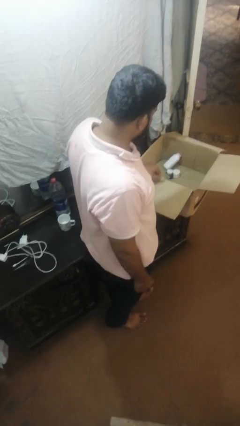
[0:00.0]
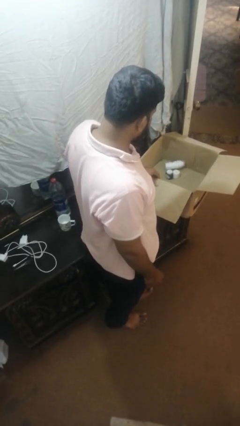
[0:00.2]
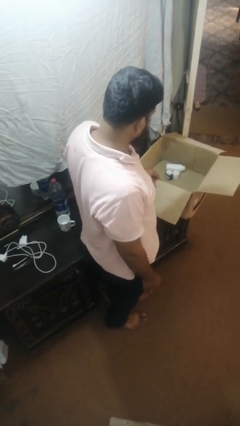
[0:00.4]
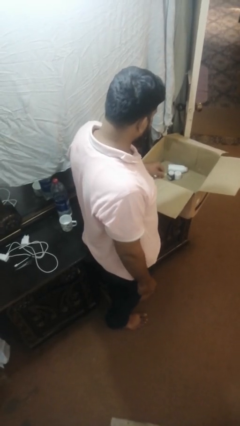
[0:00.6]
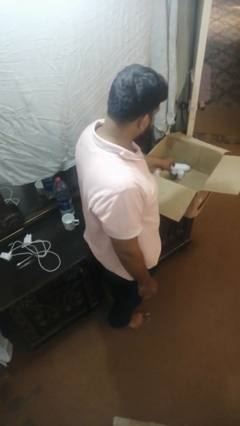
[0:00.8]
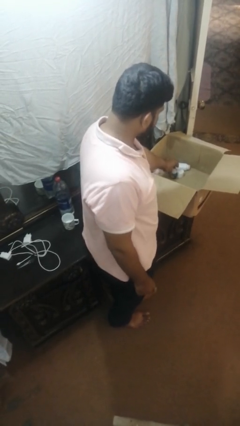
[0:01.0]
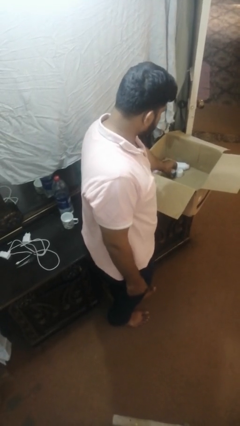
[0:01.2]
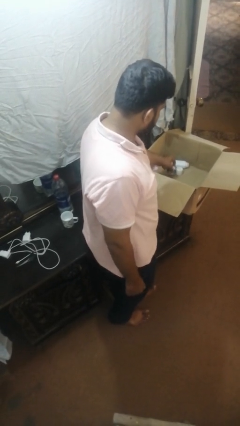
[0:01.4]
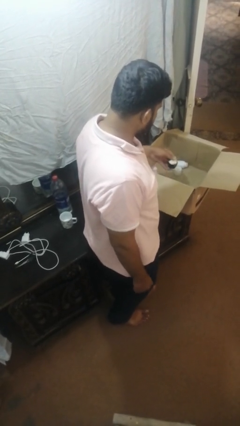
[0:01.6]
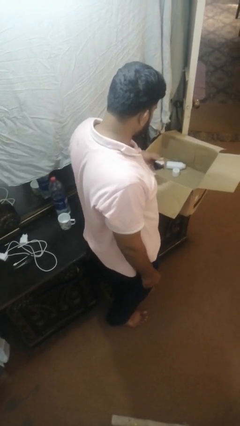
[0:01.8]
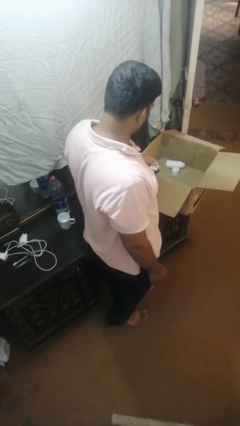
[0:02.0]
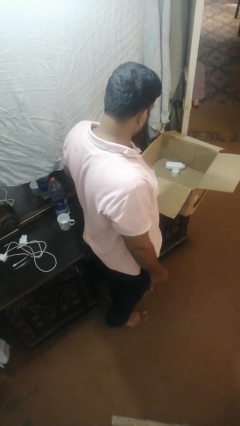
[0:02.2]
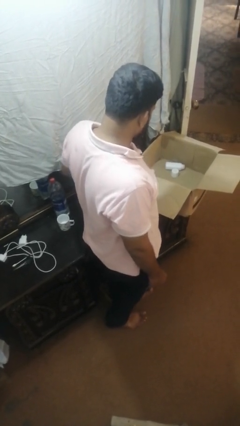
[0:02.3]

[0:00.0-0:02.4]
person takes object from box

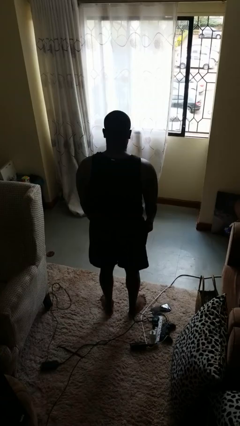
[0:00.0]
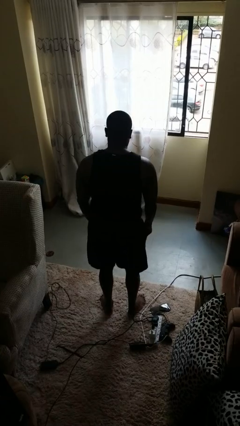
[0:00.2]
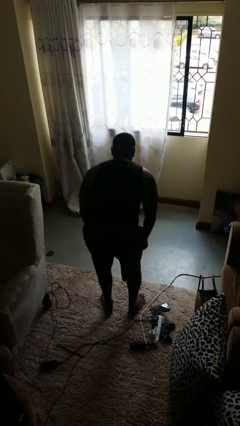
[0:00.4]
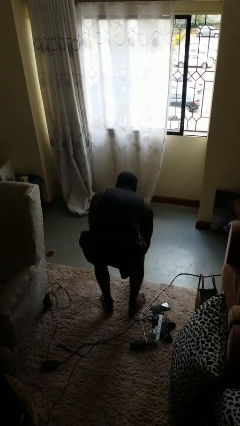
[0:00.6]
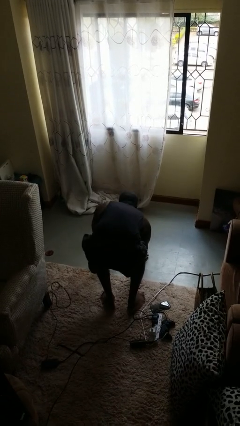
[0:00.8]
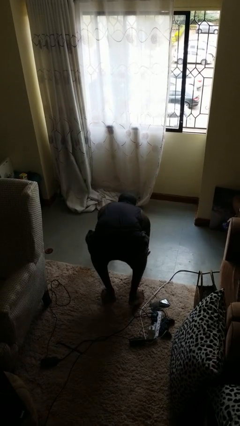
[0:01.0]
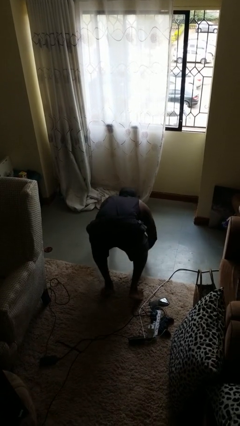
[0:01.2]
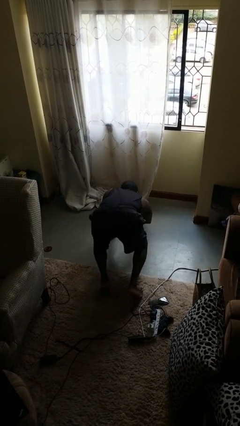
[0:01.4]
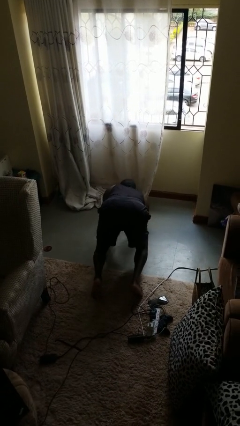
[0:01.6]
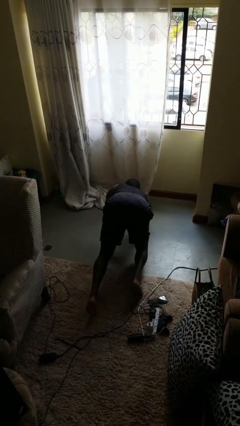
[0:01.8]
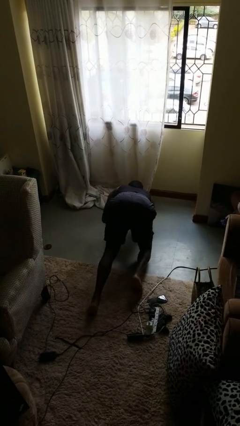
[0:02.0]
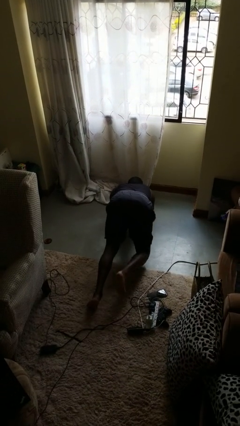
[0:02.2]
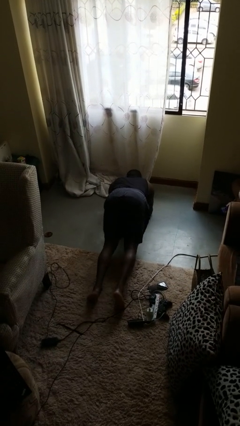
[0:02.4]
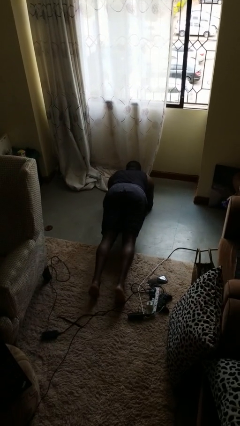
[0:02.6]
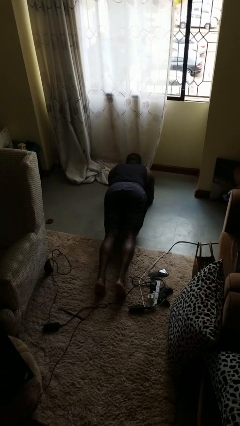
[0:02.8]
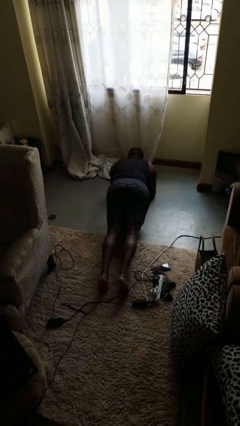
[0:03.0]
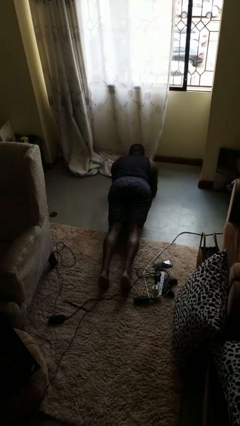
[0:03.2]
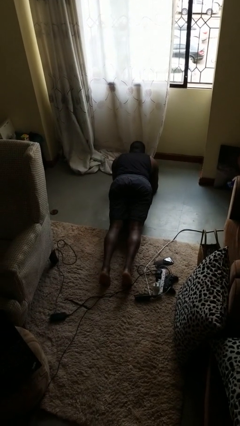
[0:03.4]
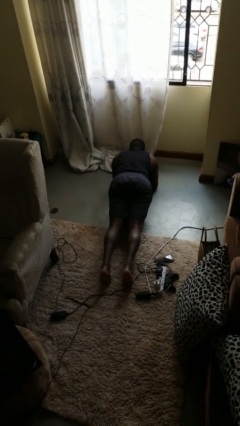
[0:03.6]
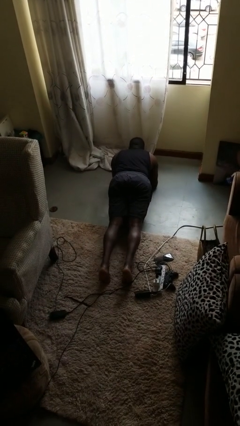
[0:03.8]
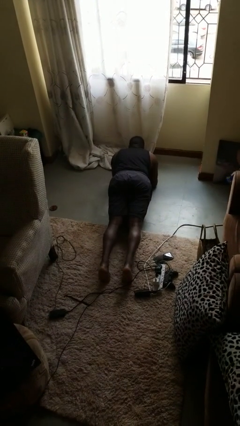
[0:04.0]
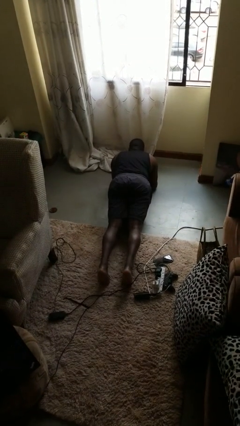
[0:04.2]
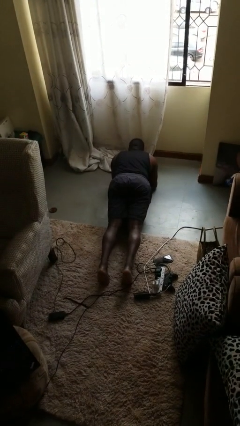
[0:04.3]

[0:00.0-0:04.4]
person exercises with plank

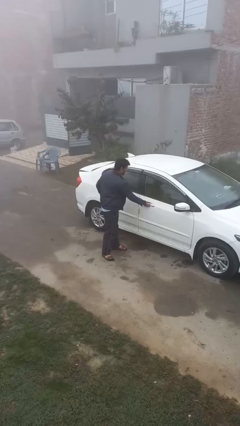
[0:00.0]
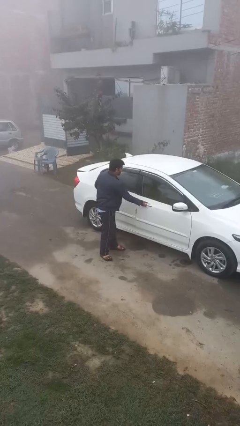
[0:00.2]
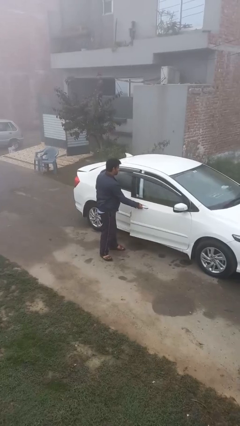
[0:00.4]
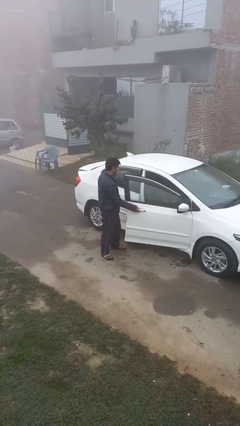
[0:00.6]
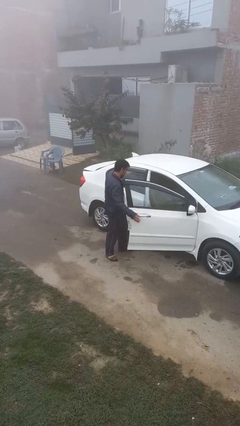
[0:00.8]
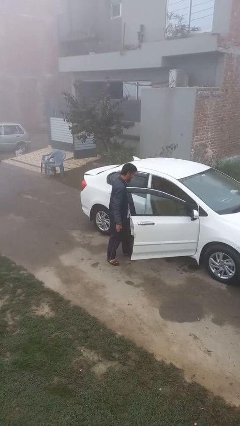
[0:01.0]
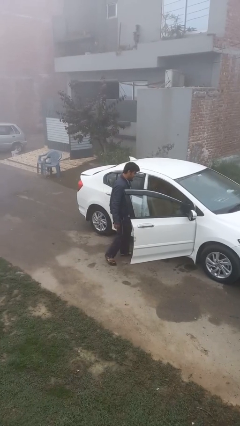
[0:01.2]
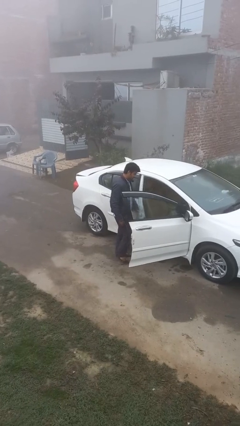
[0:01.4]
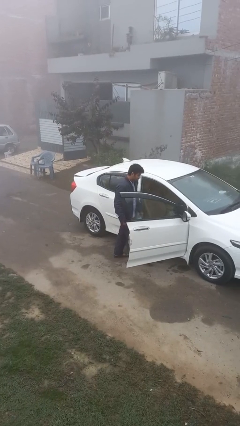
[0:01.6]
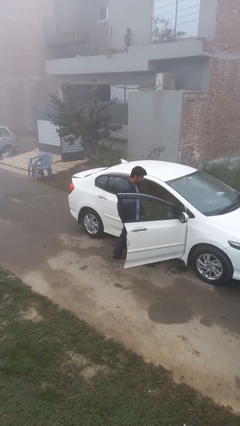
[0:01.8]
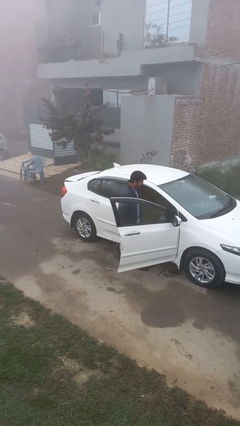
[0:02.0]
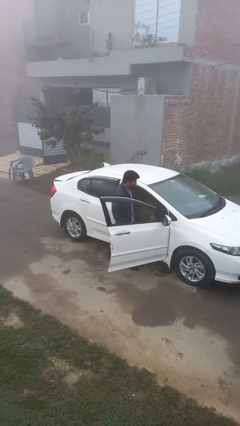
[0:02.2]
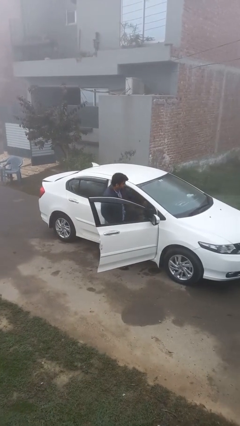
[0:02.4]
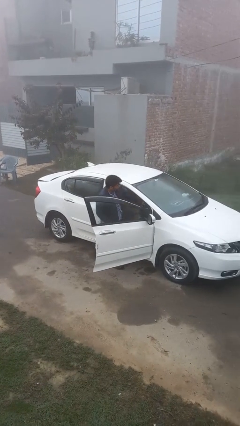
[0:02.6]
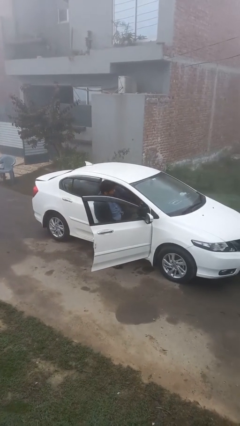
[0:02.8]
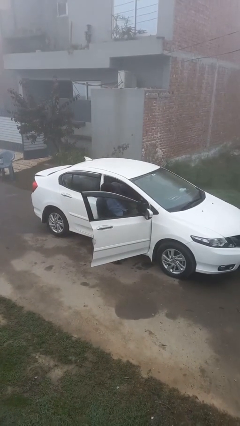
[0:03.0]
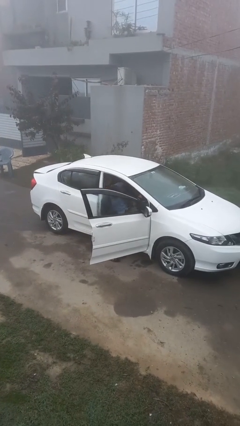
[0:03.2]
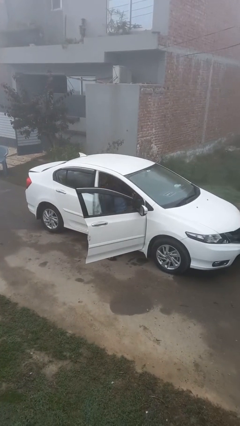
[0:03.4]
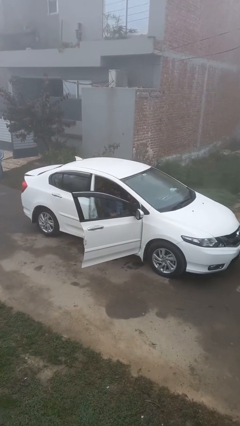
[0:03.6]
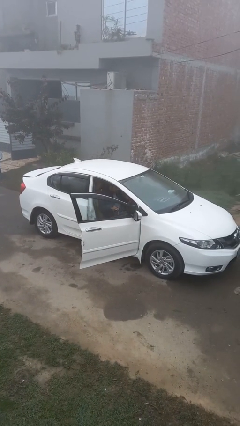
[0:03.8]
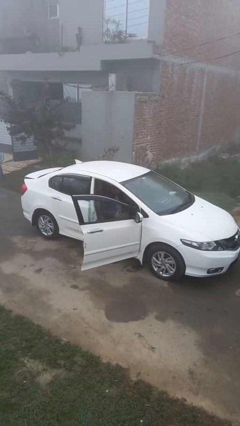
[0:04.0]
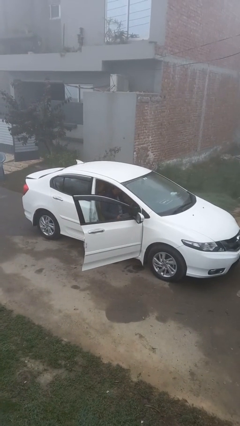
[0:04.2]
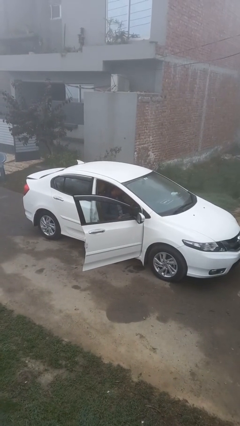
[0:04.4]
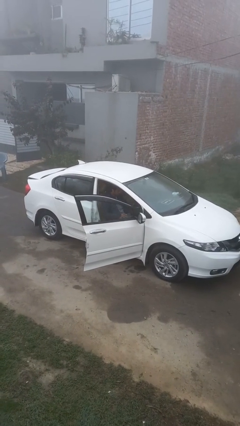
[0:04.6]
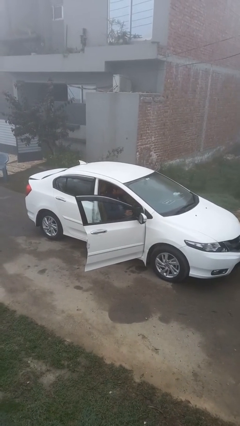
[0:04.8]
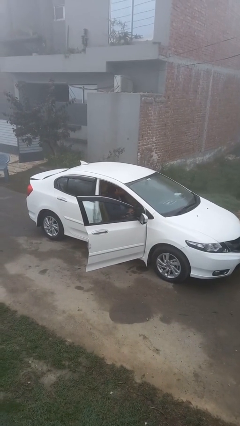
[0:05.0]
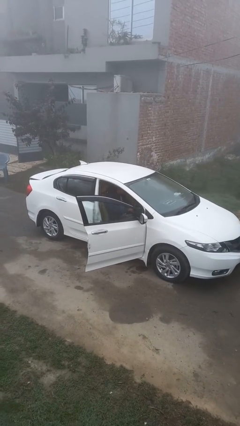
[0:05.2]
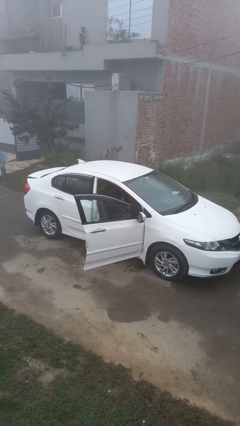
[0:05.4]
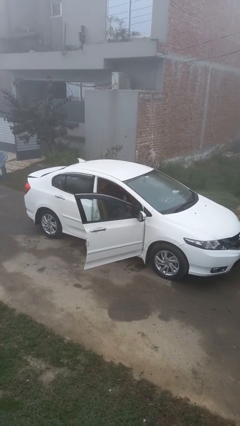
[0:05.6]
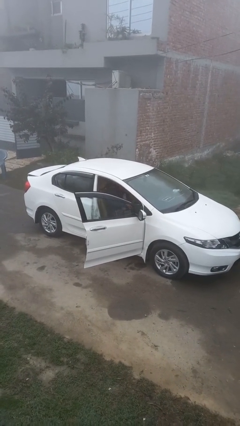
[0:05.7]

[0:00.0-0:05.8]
person enters car

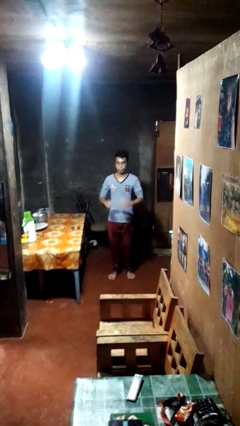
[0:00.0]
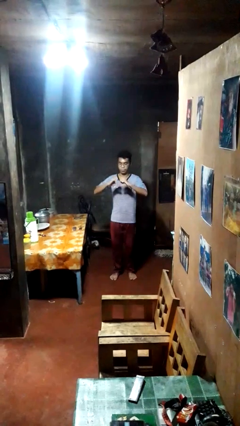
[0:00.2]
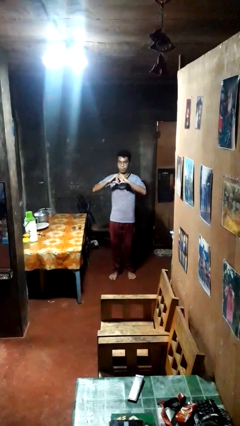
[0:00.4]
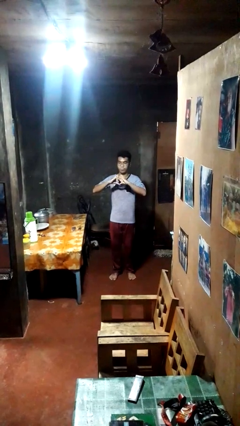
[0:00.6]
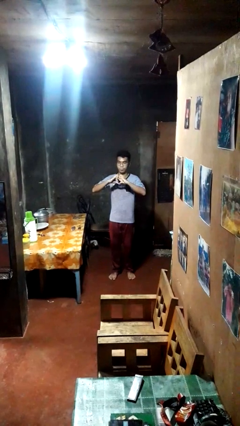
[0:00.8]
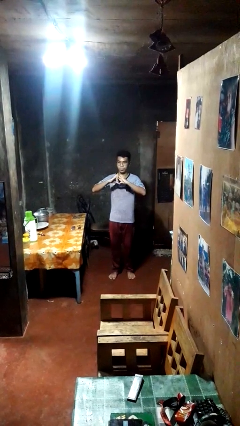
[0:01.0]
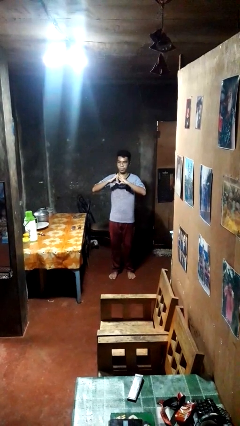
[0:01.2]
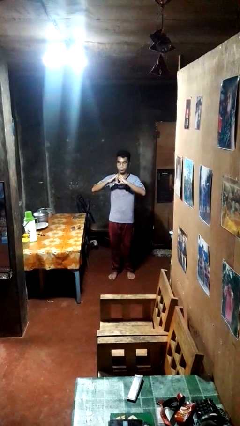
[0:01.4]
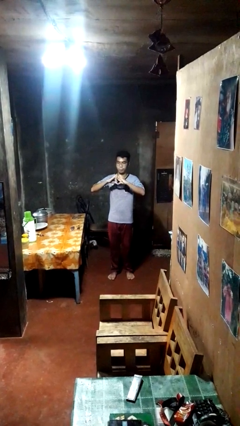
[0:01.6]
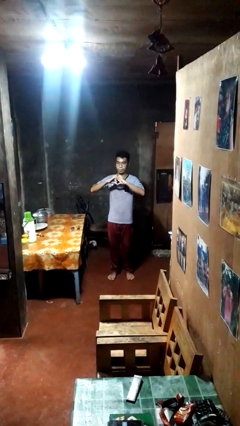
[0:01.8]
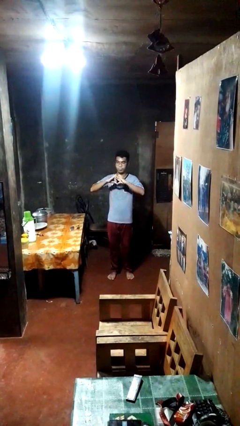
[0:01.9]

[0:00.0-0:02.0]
person gestures heart

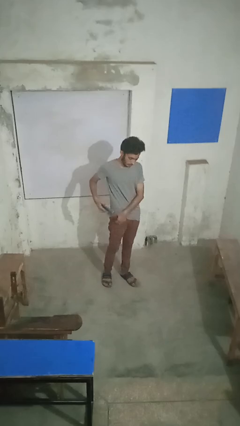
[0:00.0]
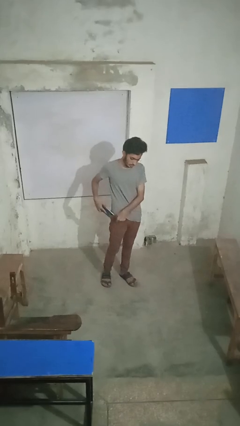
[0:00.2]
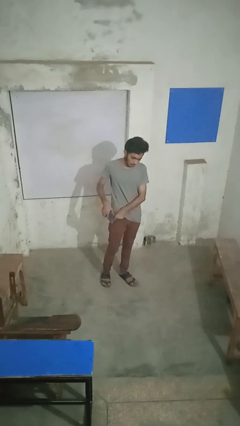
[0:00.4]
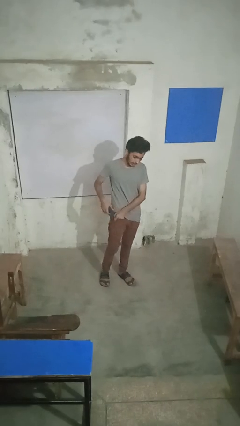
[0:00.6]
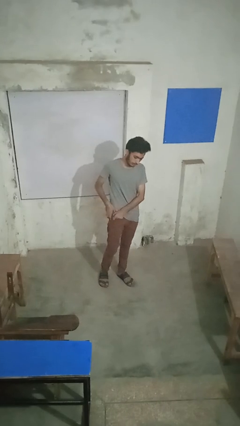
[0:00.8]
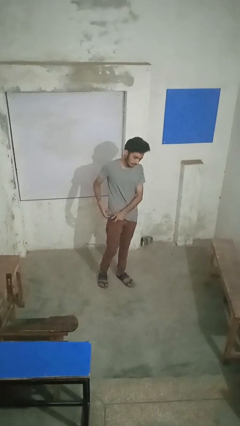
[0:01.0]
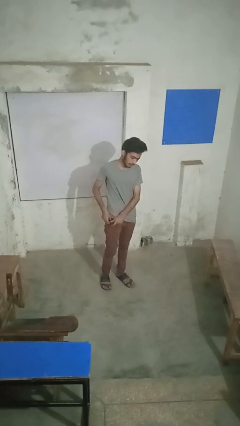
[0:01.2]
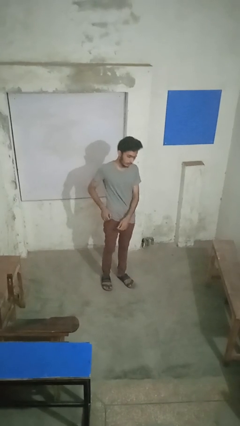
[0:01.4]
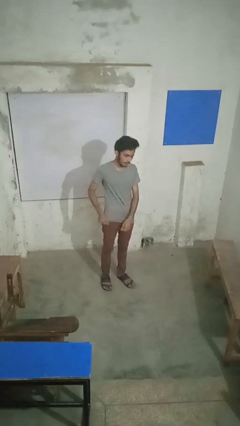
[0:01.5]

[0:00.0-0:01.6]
person puts phone into pocket

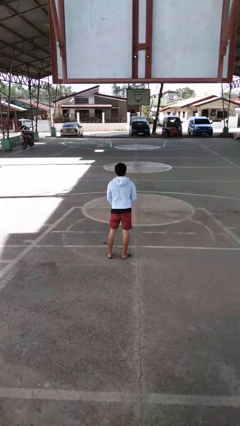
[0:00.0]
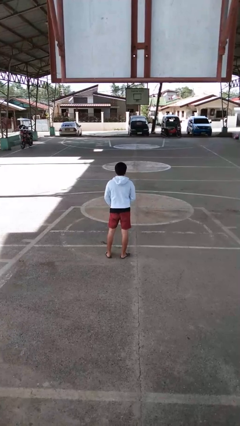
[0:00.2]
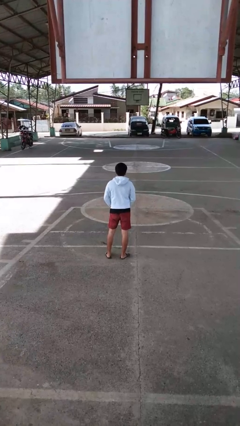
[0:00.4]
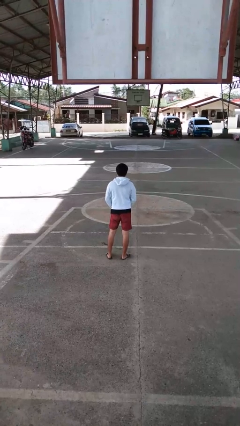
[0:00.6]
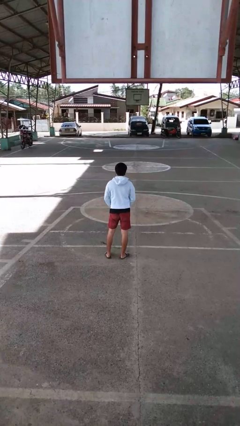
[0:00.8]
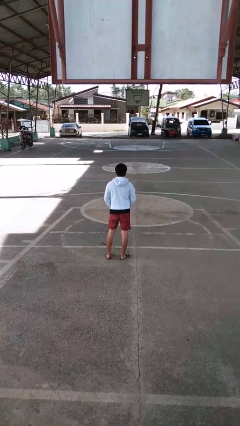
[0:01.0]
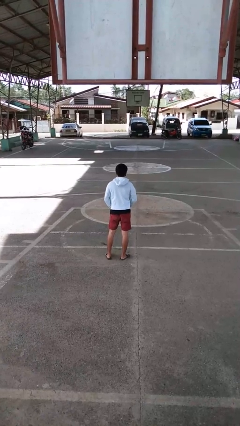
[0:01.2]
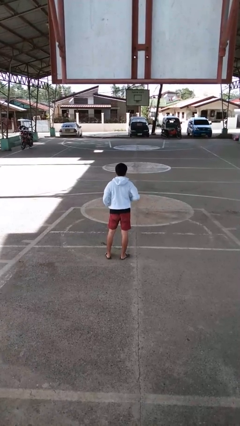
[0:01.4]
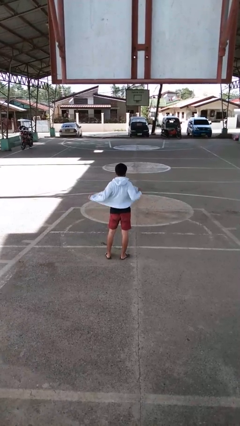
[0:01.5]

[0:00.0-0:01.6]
person unzips jacket
